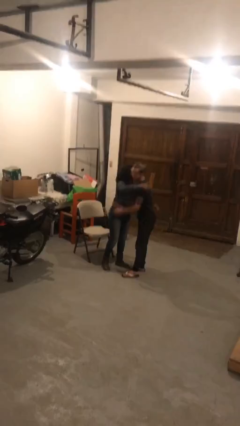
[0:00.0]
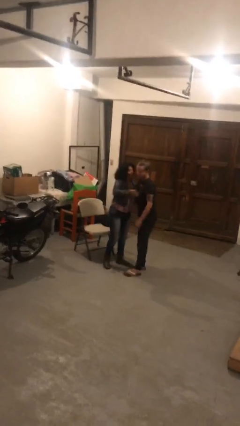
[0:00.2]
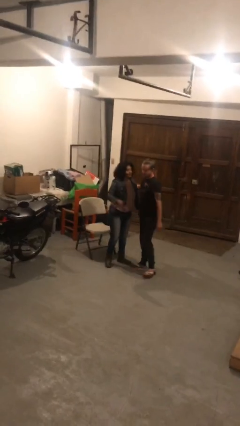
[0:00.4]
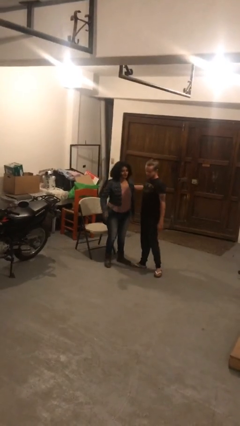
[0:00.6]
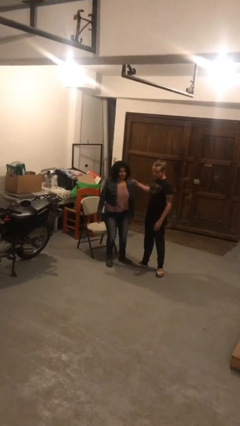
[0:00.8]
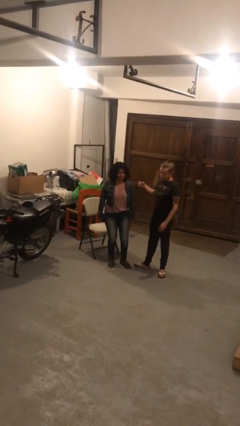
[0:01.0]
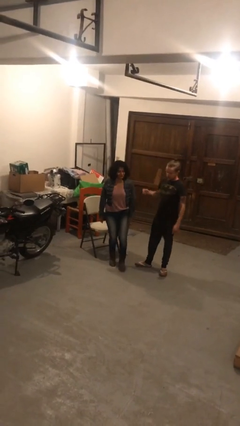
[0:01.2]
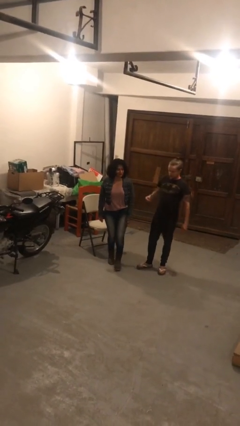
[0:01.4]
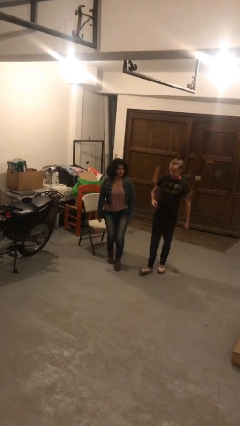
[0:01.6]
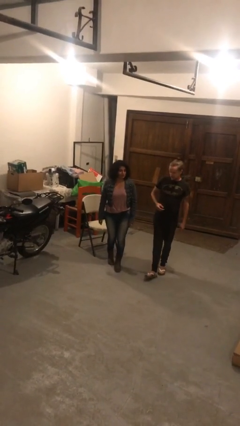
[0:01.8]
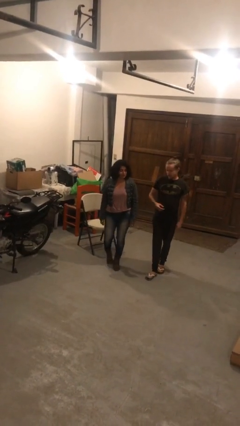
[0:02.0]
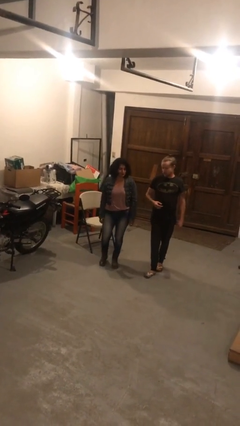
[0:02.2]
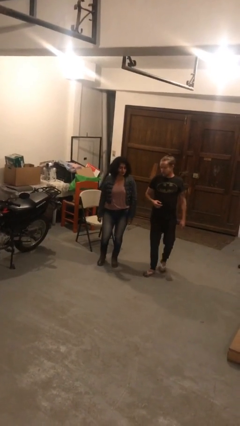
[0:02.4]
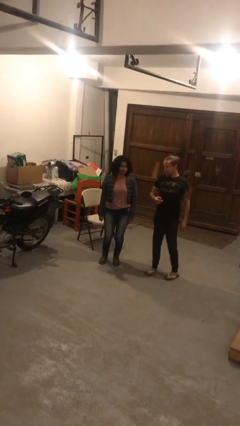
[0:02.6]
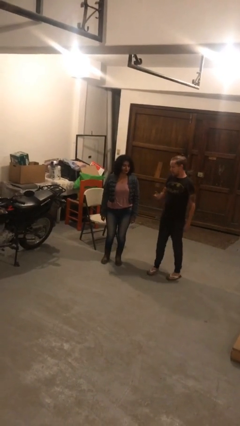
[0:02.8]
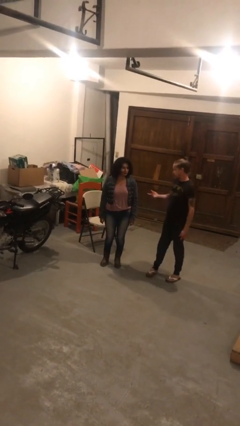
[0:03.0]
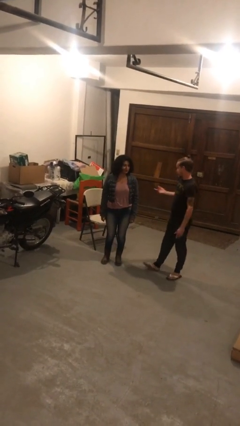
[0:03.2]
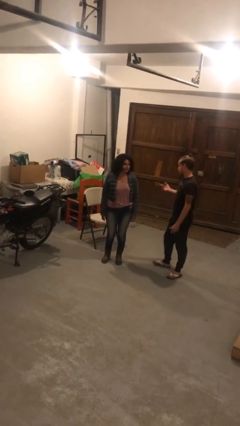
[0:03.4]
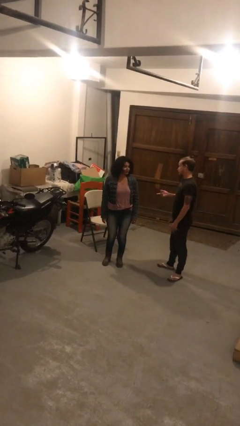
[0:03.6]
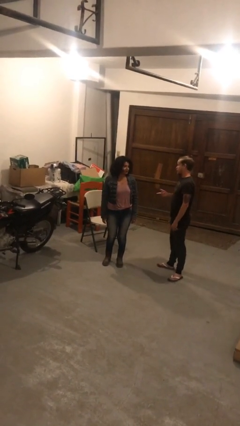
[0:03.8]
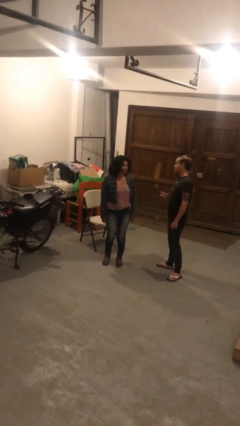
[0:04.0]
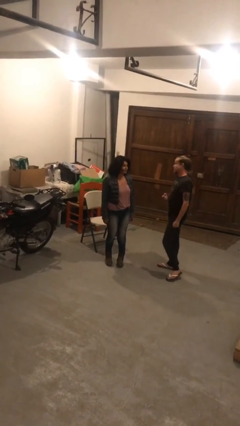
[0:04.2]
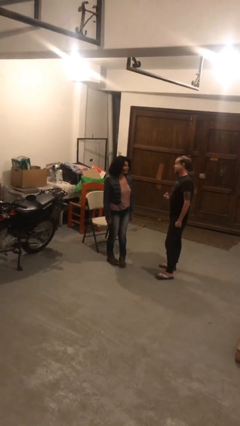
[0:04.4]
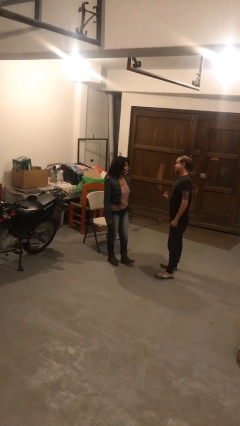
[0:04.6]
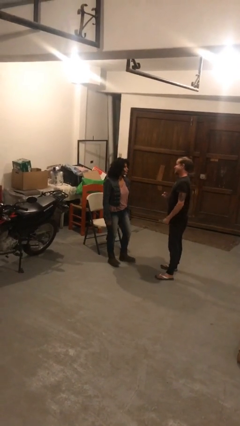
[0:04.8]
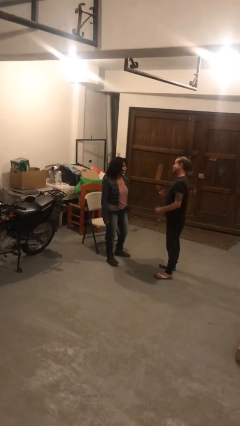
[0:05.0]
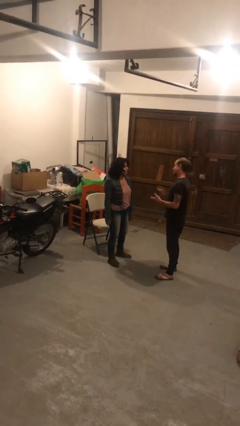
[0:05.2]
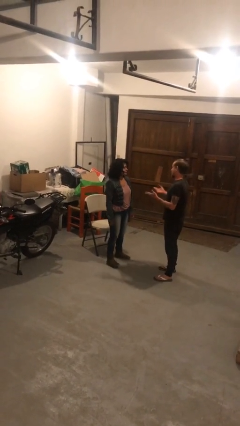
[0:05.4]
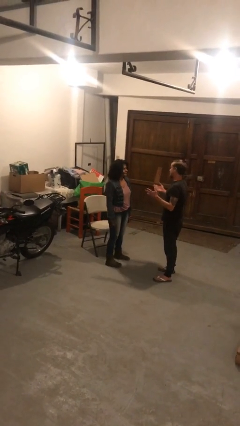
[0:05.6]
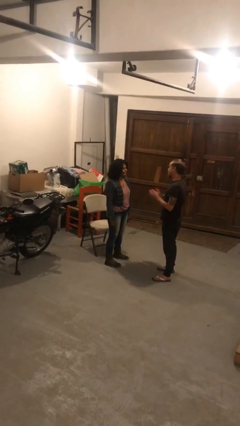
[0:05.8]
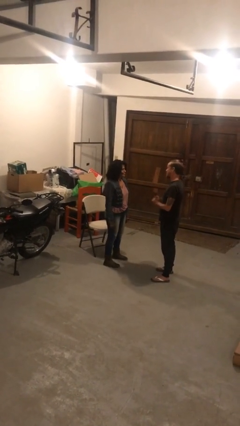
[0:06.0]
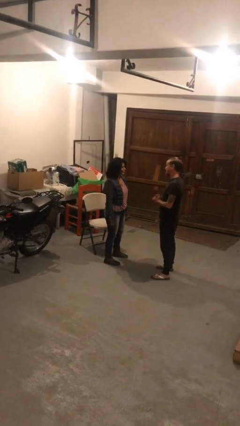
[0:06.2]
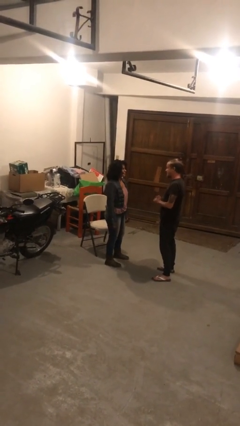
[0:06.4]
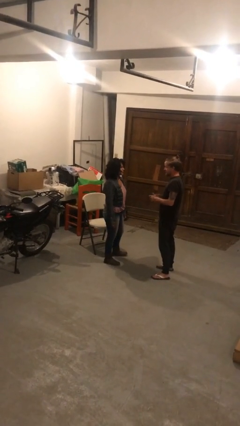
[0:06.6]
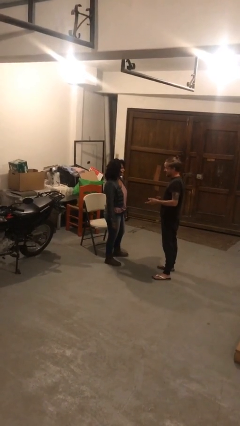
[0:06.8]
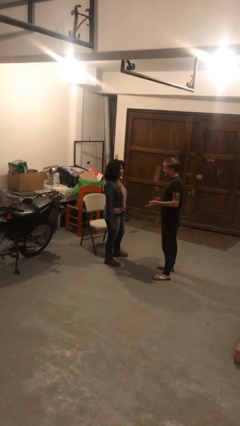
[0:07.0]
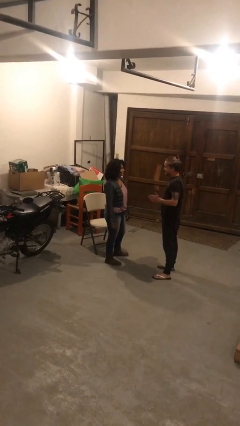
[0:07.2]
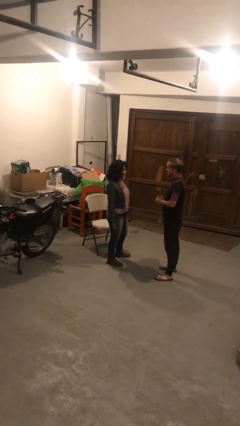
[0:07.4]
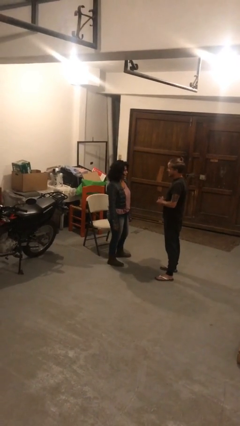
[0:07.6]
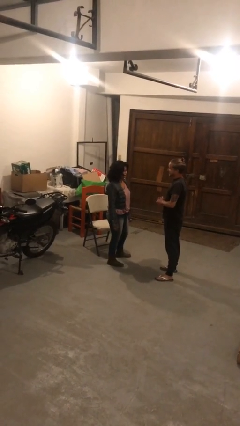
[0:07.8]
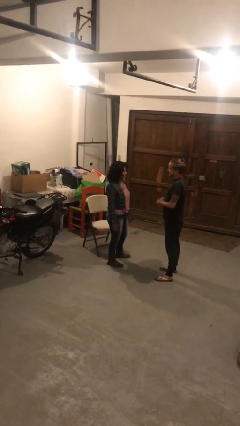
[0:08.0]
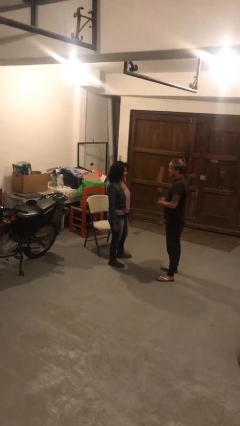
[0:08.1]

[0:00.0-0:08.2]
person talks to person

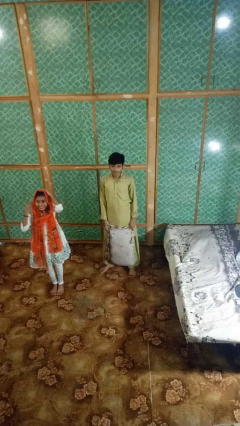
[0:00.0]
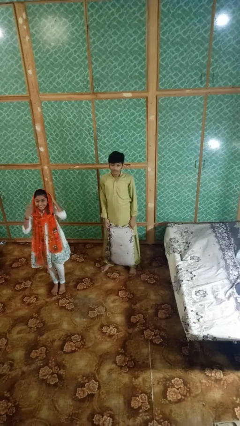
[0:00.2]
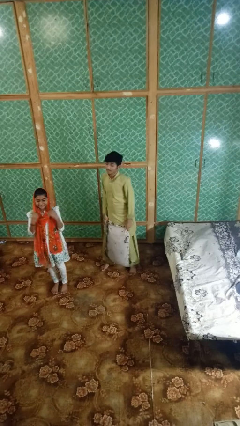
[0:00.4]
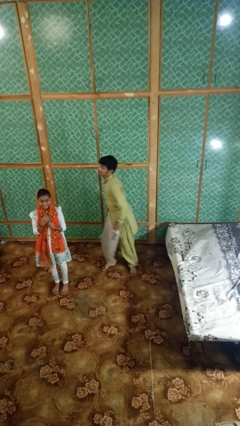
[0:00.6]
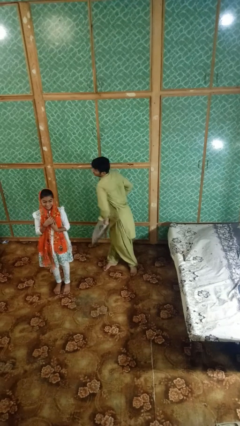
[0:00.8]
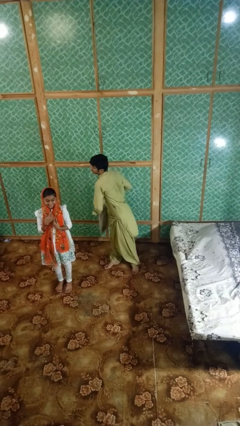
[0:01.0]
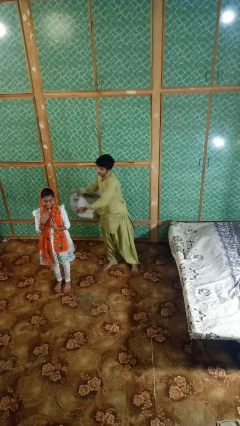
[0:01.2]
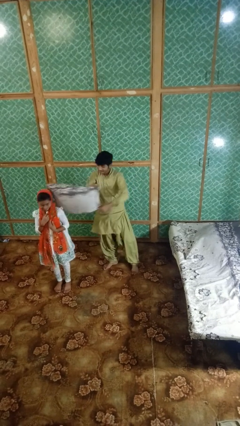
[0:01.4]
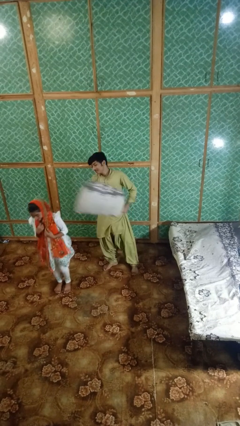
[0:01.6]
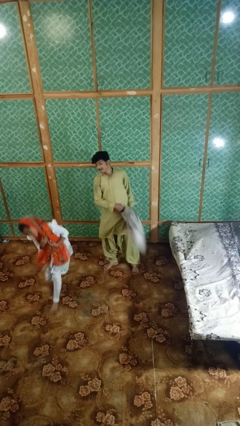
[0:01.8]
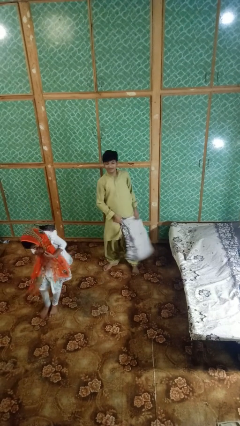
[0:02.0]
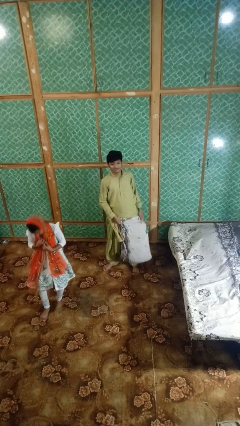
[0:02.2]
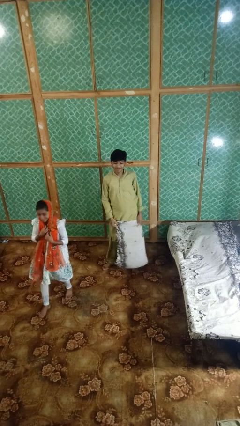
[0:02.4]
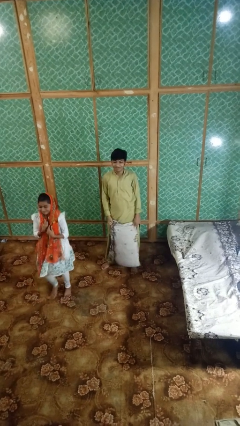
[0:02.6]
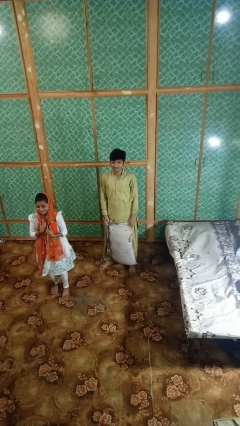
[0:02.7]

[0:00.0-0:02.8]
person hits person with pillow

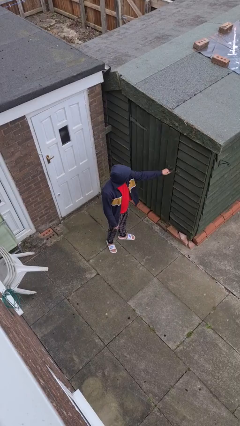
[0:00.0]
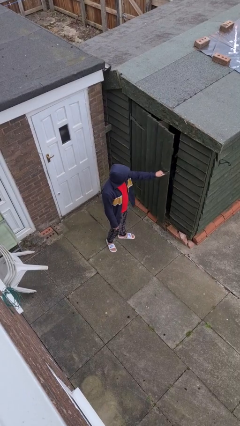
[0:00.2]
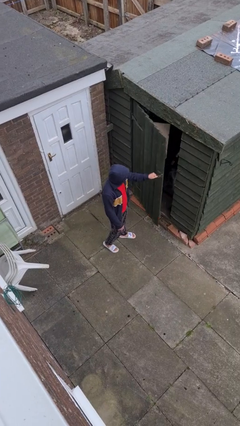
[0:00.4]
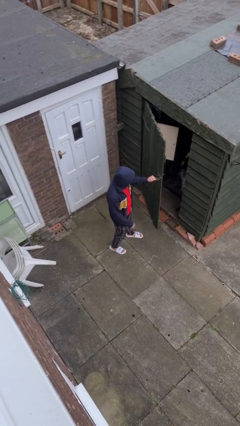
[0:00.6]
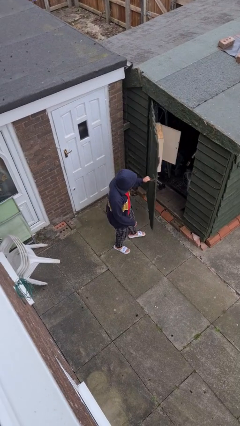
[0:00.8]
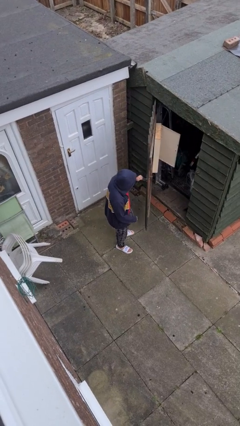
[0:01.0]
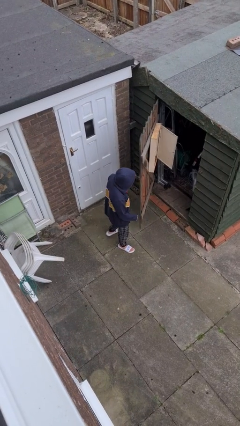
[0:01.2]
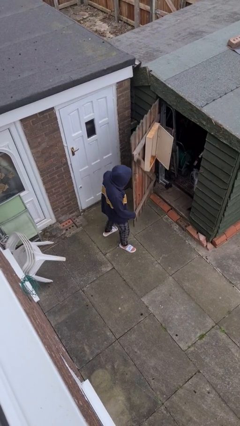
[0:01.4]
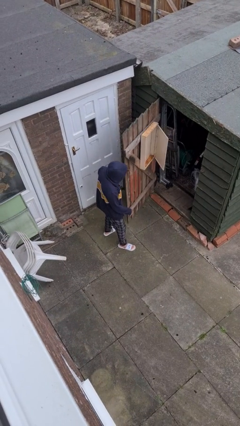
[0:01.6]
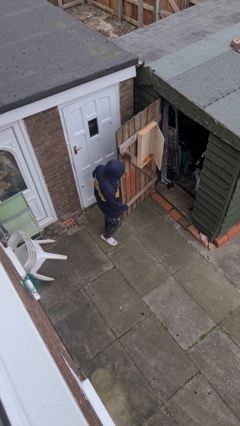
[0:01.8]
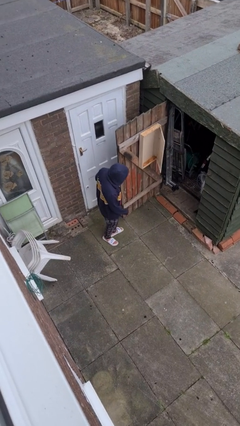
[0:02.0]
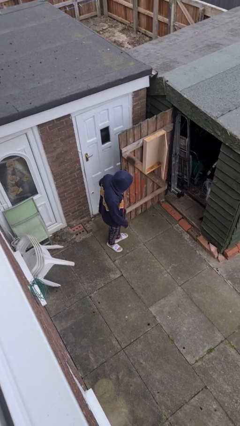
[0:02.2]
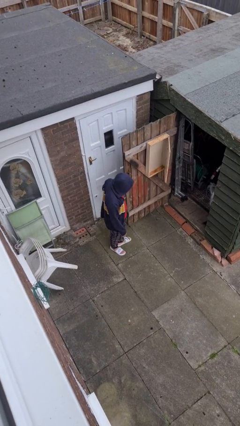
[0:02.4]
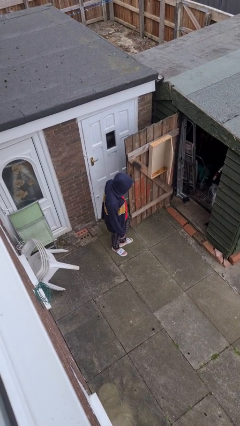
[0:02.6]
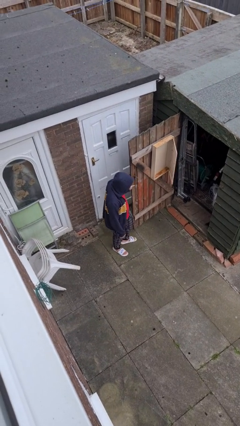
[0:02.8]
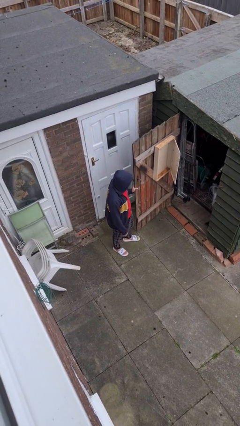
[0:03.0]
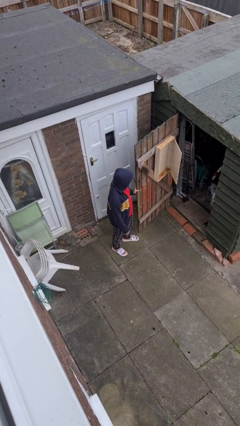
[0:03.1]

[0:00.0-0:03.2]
person opens facility door

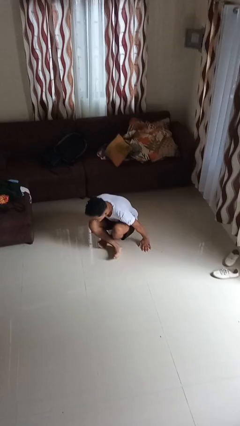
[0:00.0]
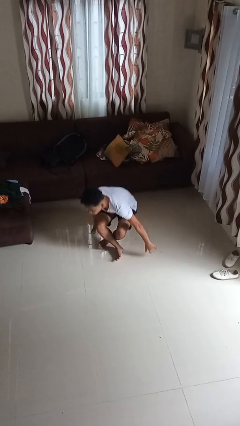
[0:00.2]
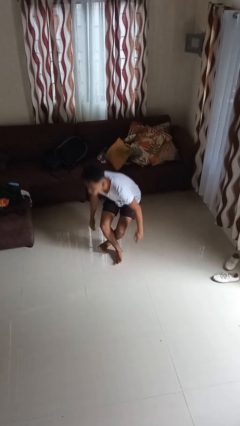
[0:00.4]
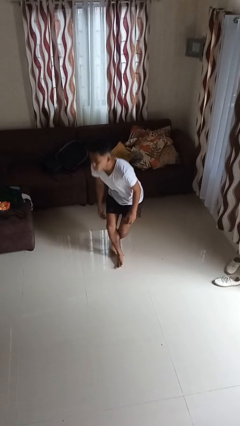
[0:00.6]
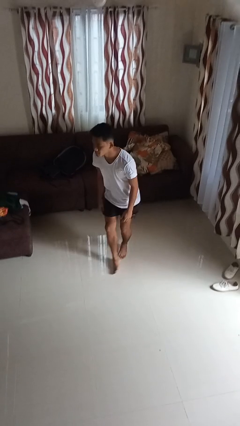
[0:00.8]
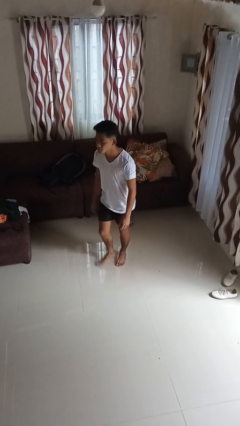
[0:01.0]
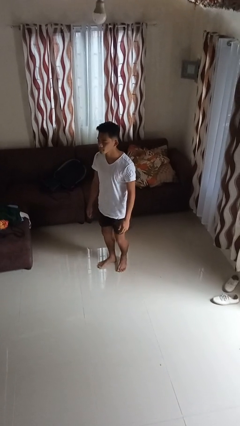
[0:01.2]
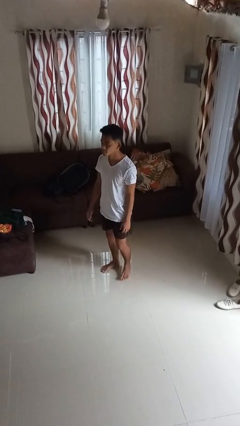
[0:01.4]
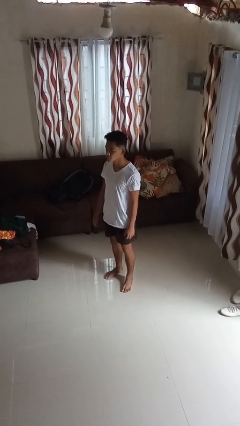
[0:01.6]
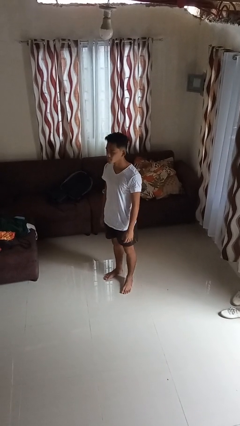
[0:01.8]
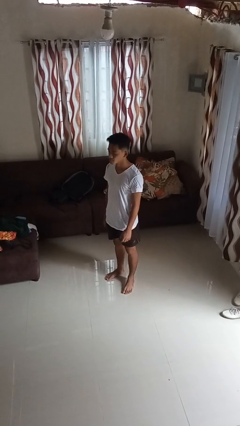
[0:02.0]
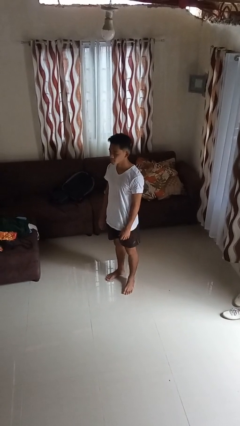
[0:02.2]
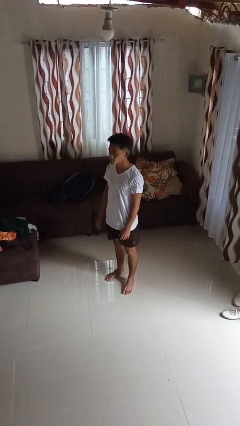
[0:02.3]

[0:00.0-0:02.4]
person stands up from floor

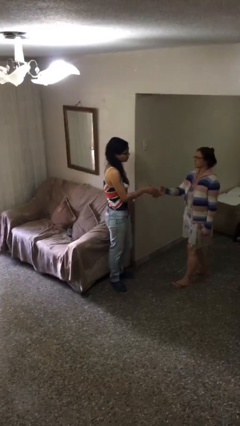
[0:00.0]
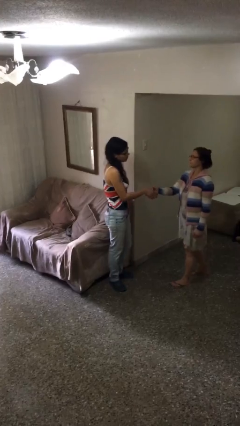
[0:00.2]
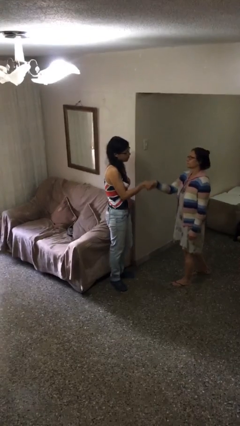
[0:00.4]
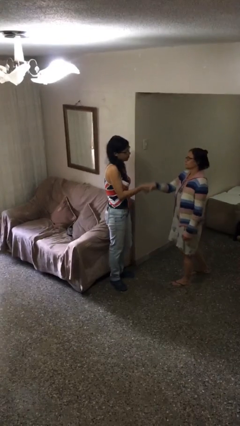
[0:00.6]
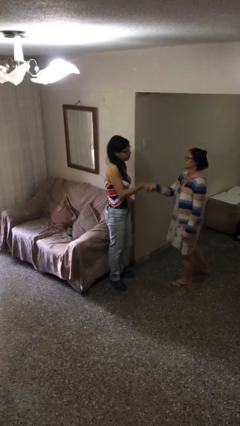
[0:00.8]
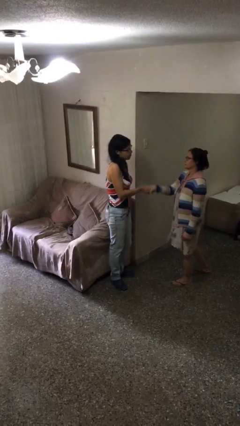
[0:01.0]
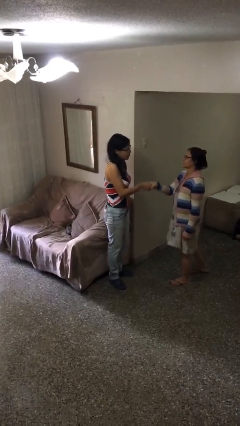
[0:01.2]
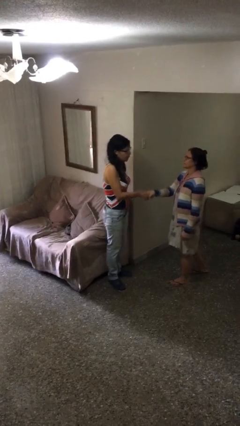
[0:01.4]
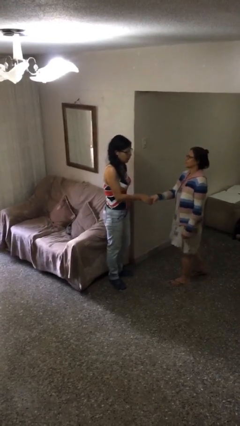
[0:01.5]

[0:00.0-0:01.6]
person shakes hand
